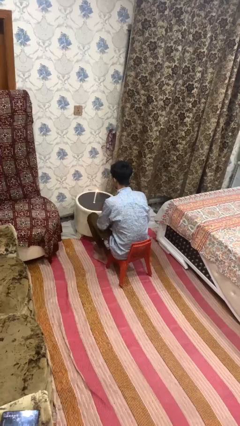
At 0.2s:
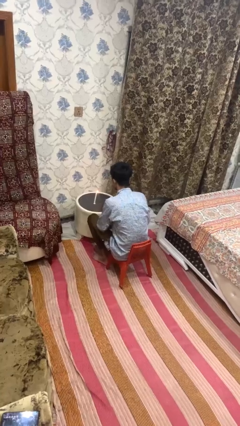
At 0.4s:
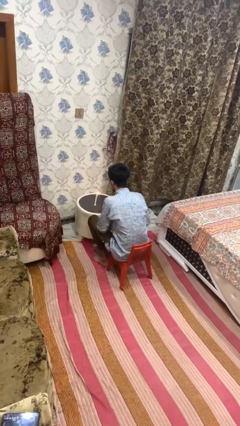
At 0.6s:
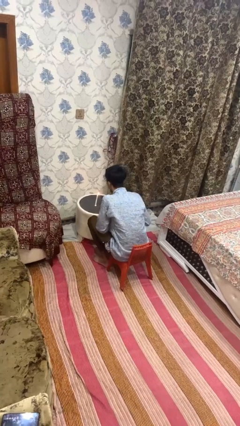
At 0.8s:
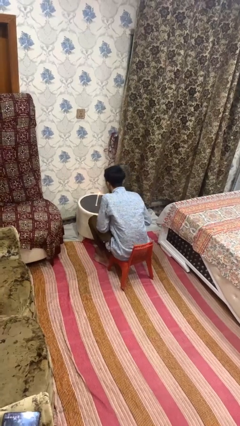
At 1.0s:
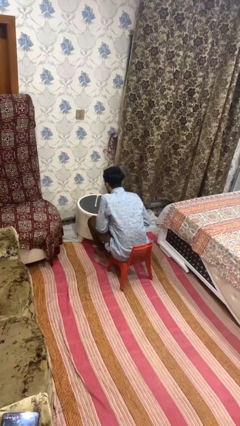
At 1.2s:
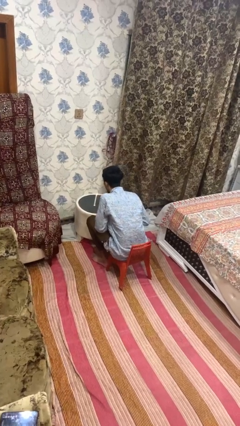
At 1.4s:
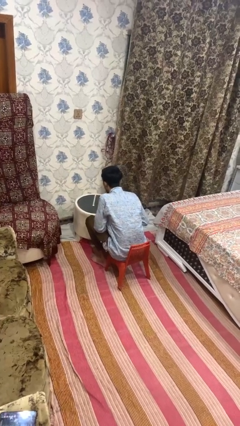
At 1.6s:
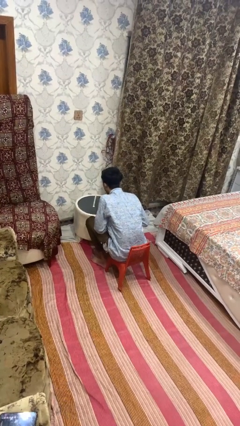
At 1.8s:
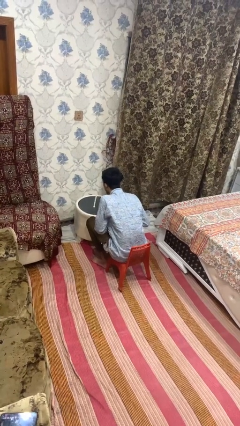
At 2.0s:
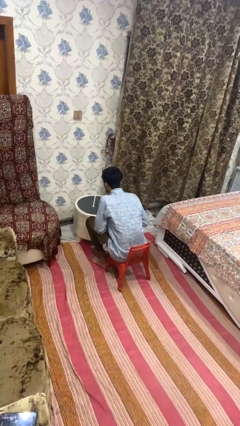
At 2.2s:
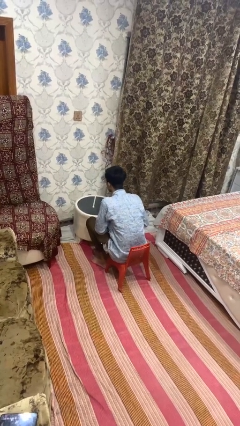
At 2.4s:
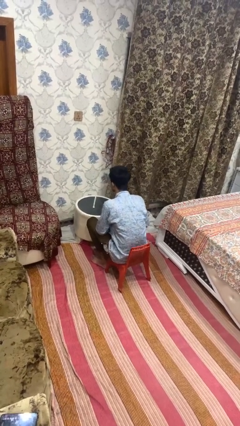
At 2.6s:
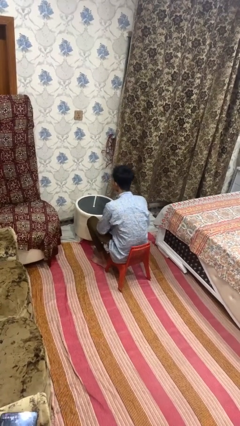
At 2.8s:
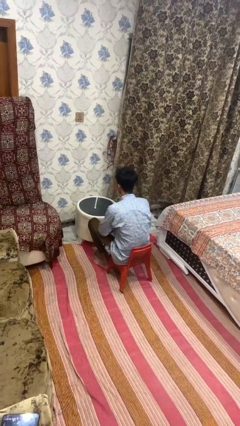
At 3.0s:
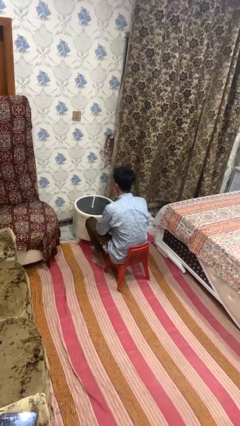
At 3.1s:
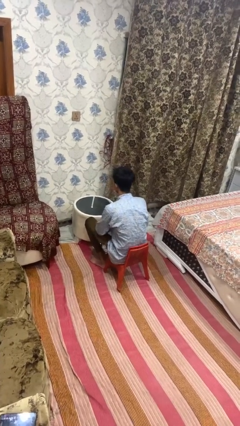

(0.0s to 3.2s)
person extinguishes candle

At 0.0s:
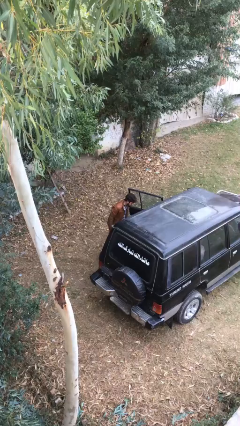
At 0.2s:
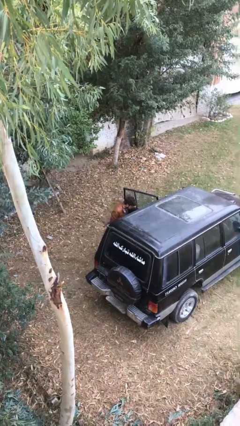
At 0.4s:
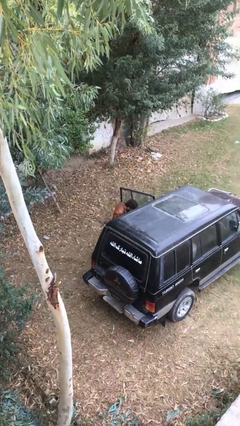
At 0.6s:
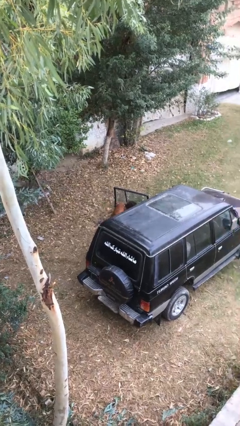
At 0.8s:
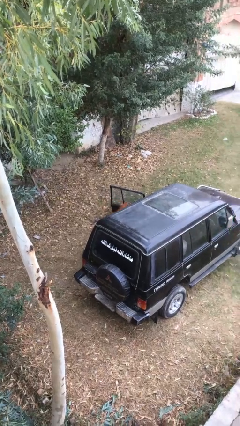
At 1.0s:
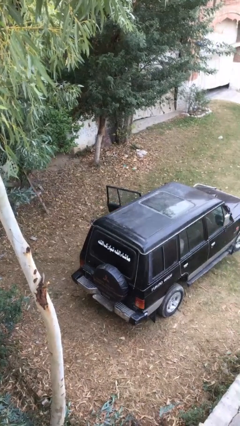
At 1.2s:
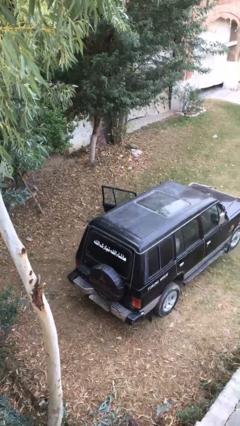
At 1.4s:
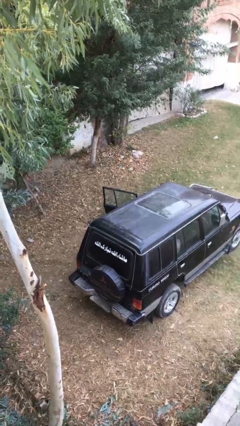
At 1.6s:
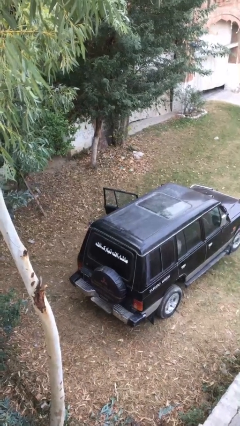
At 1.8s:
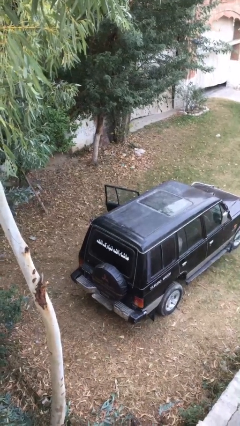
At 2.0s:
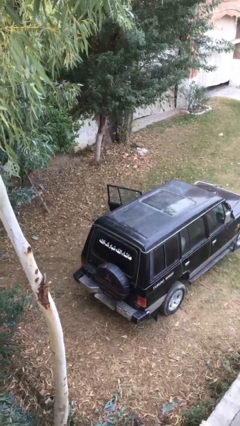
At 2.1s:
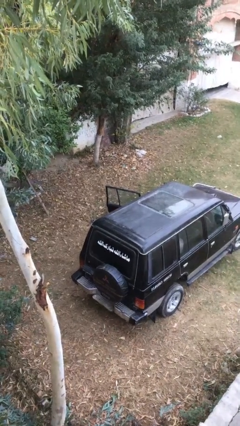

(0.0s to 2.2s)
person enters car

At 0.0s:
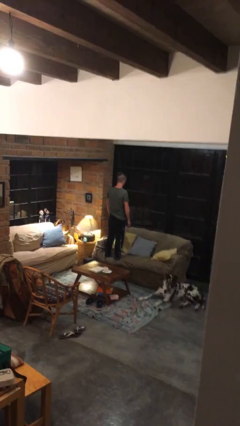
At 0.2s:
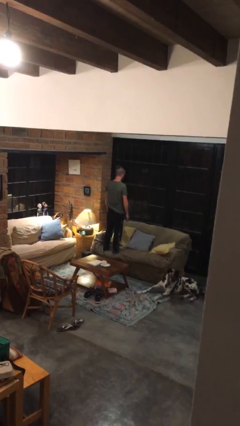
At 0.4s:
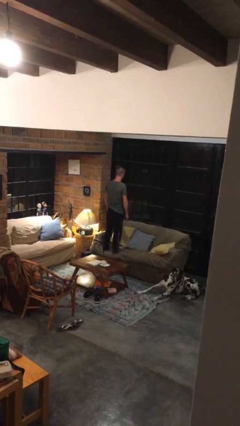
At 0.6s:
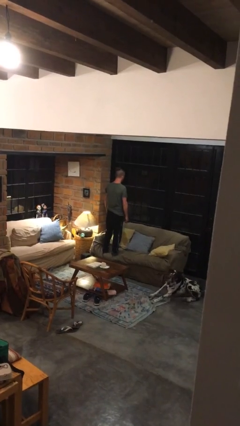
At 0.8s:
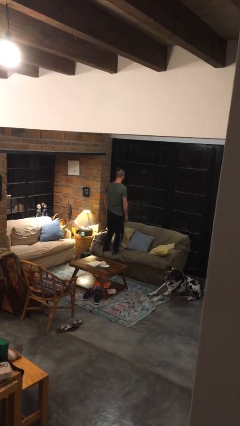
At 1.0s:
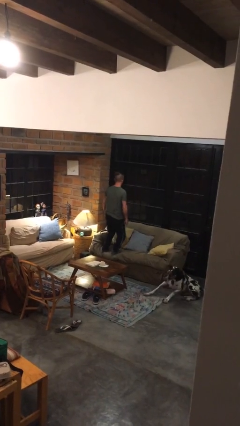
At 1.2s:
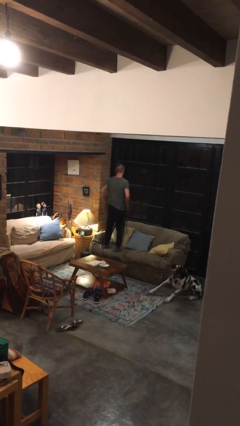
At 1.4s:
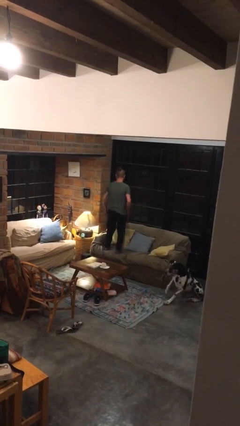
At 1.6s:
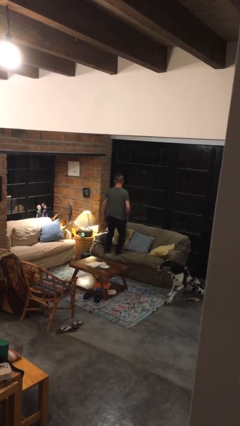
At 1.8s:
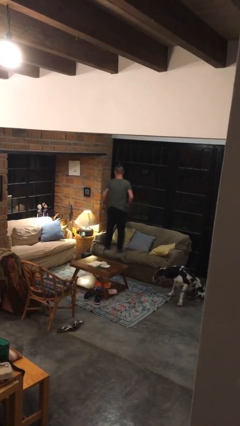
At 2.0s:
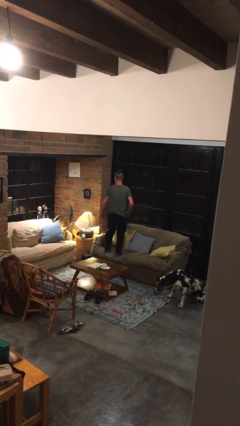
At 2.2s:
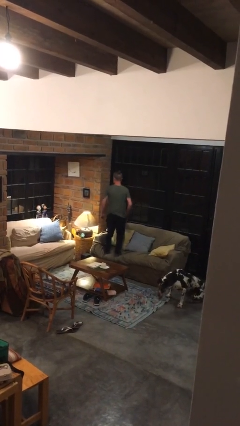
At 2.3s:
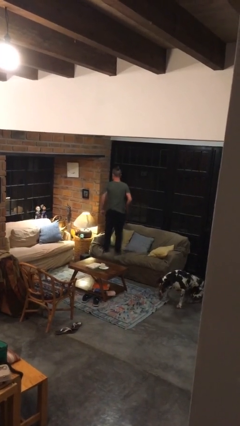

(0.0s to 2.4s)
person jumps on couch

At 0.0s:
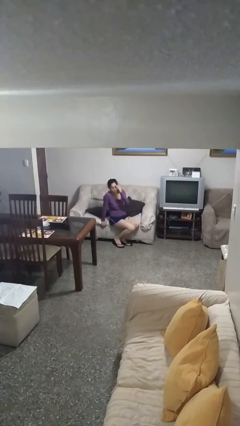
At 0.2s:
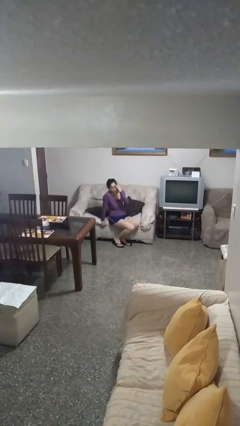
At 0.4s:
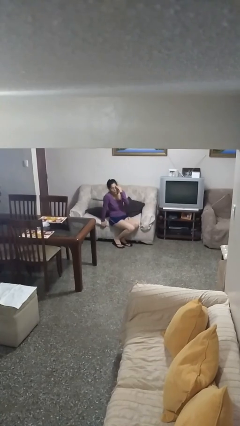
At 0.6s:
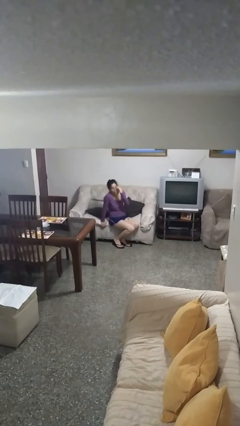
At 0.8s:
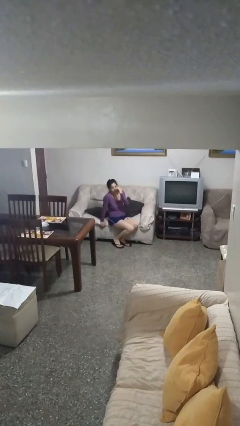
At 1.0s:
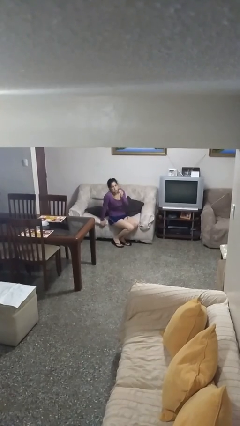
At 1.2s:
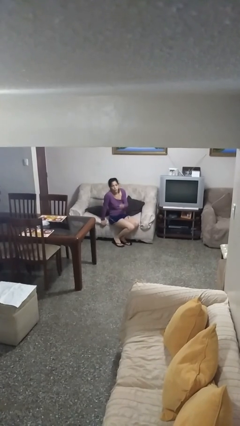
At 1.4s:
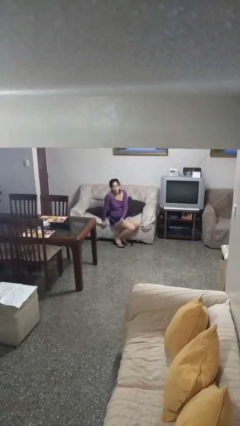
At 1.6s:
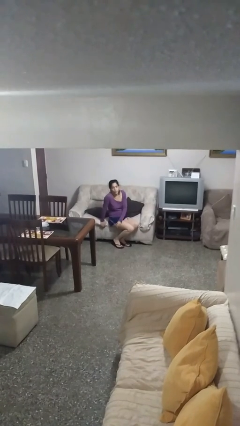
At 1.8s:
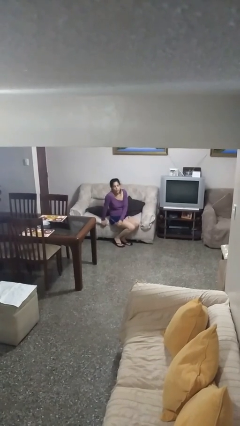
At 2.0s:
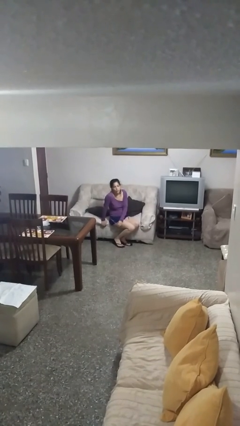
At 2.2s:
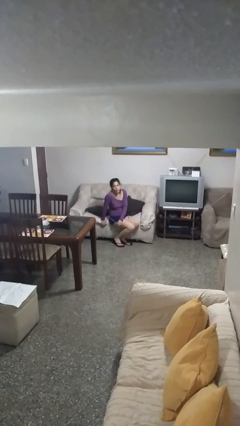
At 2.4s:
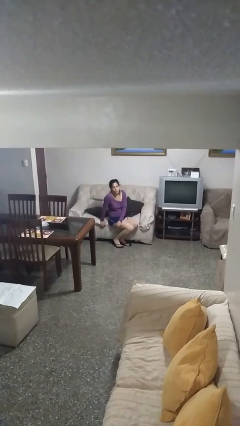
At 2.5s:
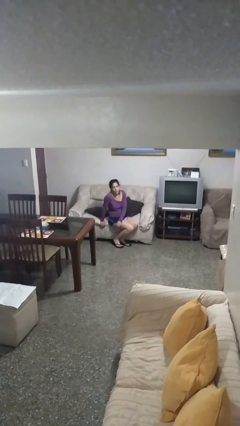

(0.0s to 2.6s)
person takes off glasses

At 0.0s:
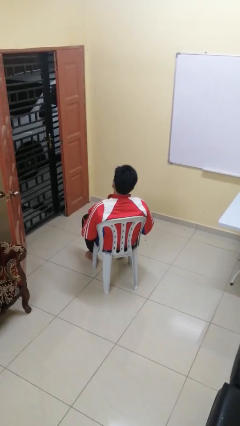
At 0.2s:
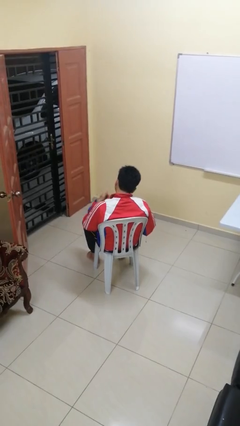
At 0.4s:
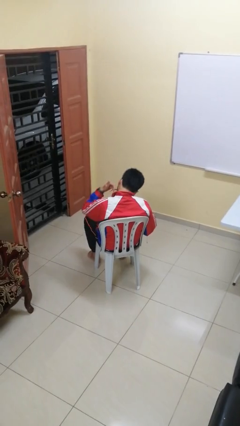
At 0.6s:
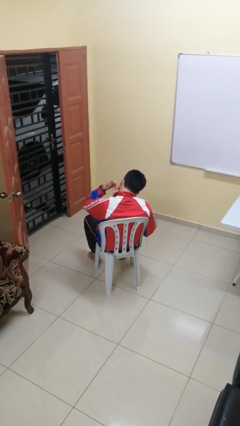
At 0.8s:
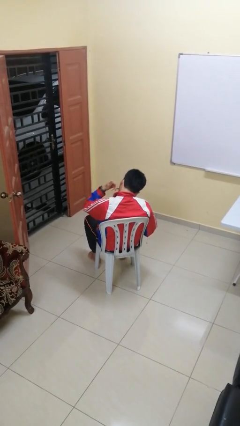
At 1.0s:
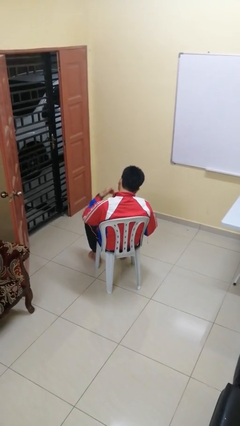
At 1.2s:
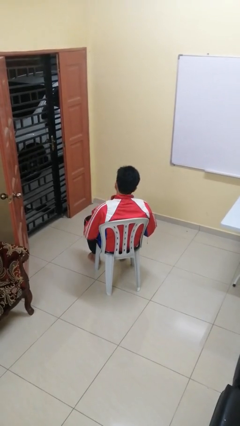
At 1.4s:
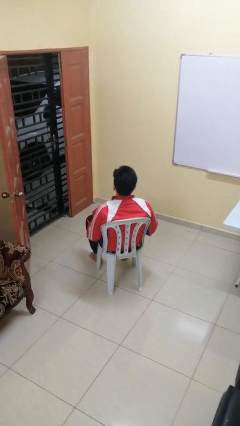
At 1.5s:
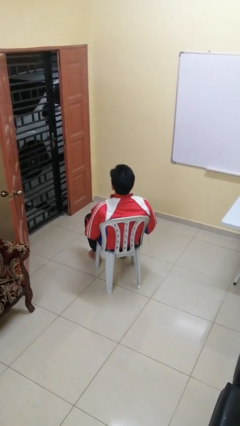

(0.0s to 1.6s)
person gestures call me

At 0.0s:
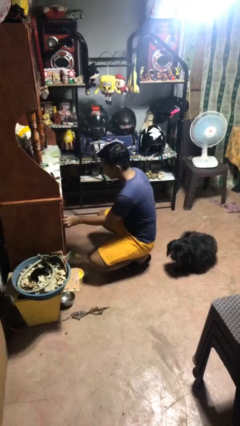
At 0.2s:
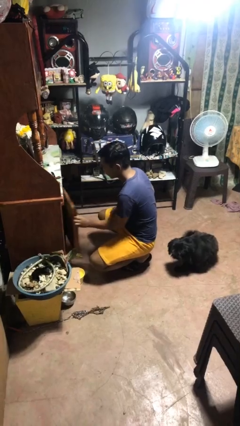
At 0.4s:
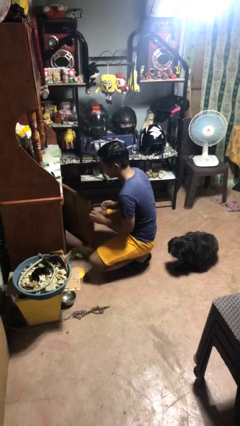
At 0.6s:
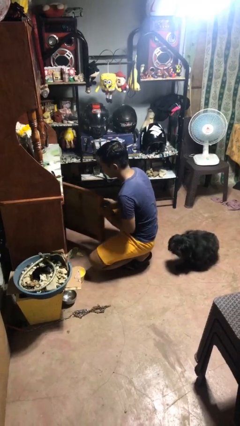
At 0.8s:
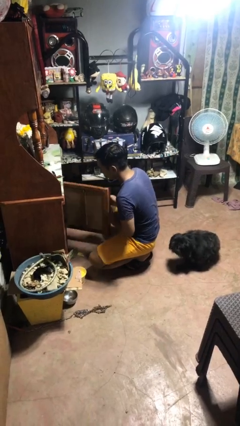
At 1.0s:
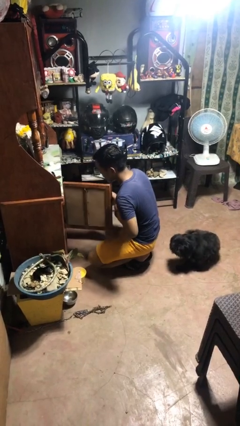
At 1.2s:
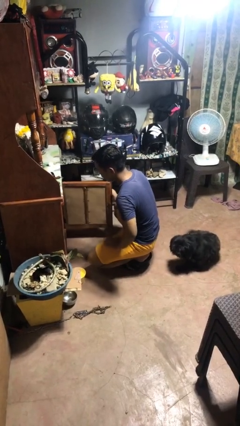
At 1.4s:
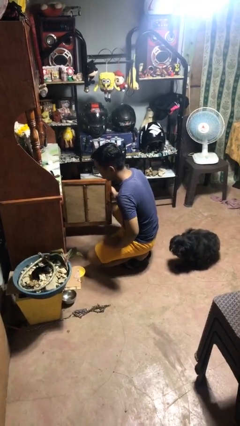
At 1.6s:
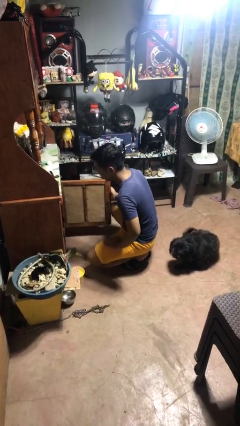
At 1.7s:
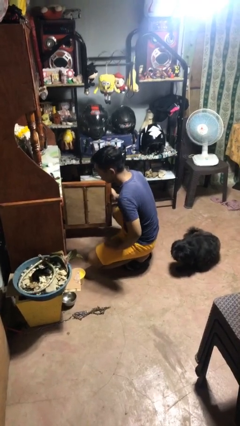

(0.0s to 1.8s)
person opens cabinet

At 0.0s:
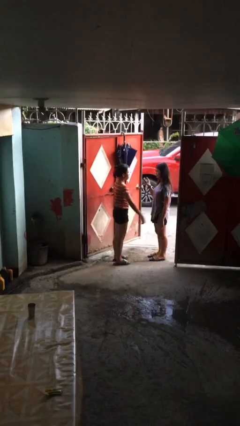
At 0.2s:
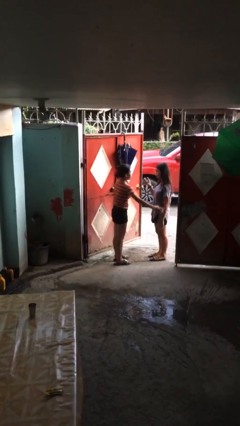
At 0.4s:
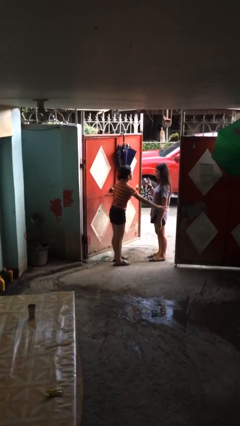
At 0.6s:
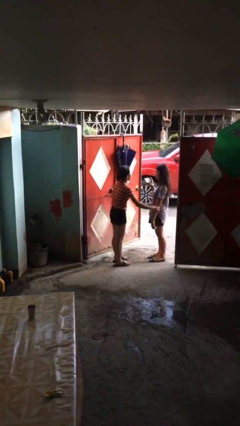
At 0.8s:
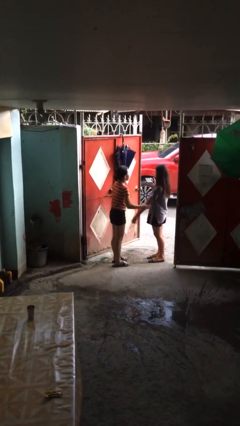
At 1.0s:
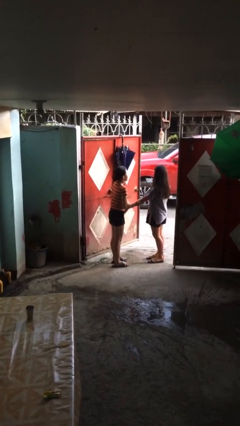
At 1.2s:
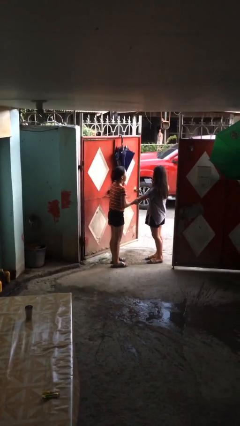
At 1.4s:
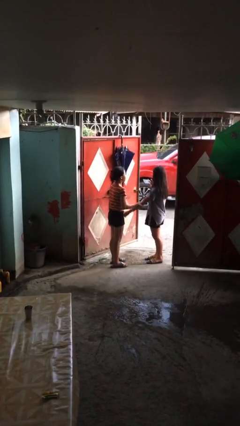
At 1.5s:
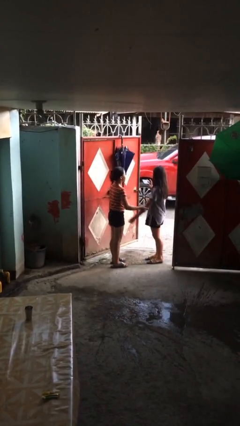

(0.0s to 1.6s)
person grabs person by forearm

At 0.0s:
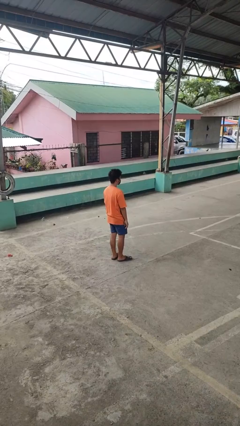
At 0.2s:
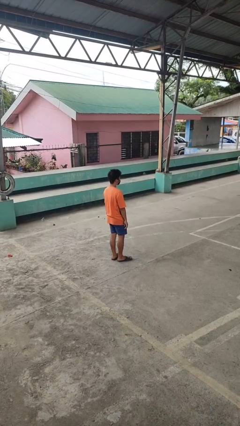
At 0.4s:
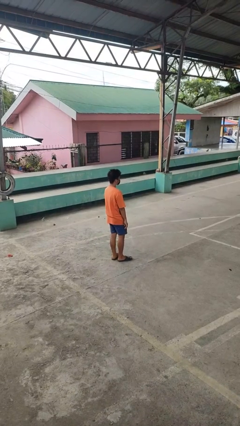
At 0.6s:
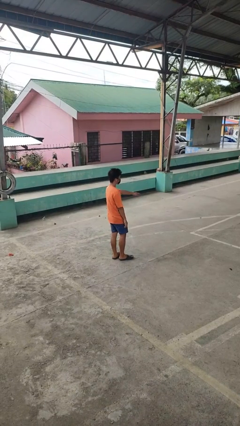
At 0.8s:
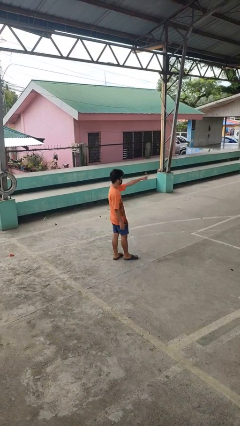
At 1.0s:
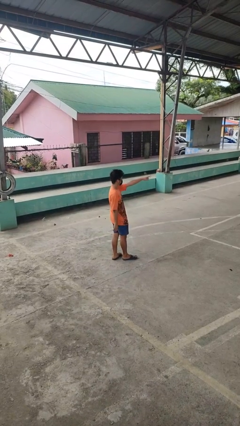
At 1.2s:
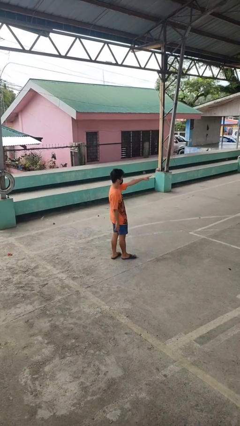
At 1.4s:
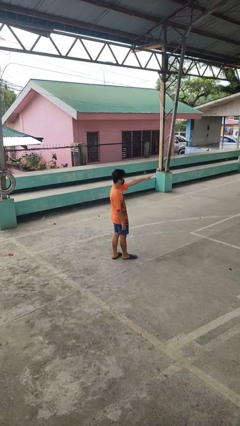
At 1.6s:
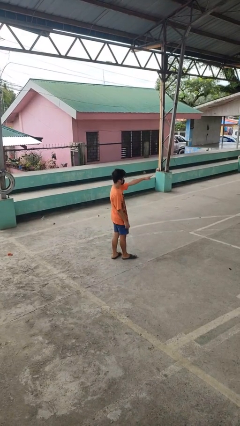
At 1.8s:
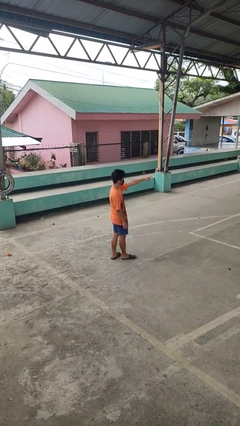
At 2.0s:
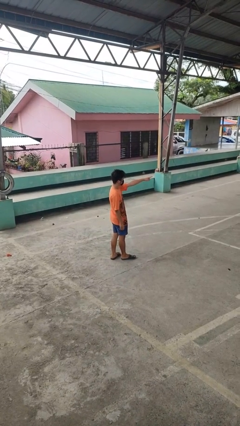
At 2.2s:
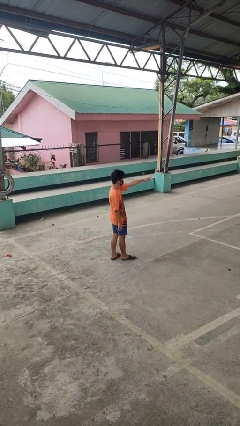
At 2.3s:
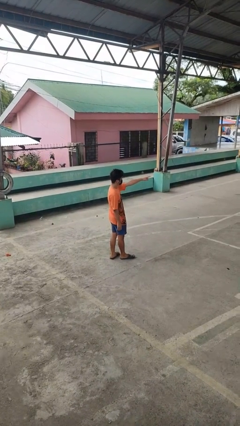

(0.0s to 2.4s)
person points at person
